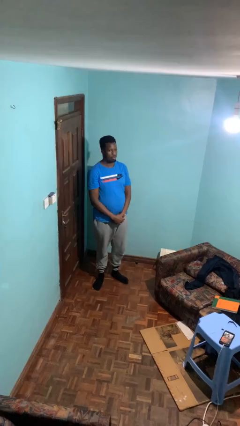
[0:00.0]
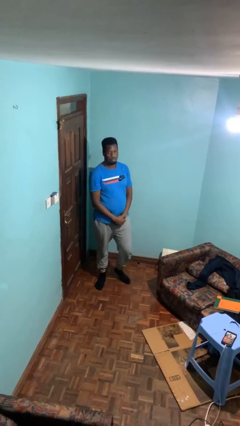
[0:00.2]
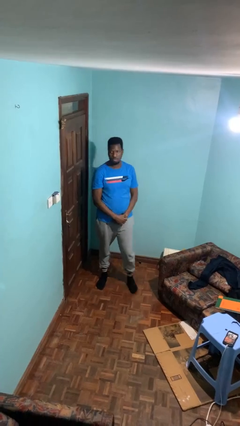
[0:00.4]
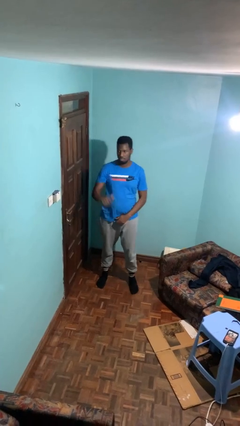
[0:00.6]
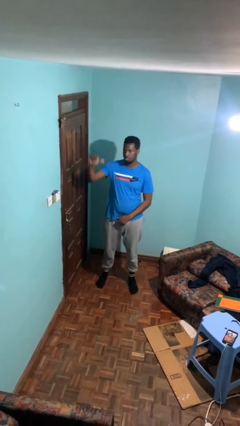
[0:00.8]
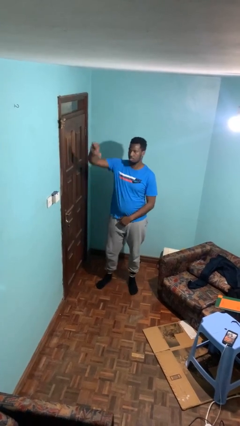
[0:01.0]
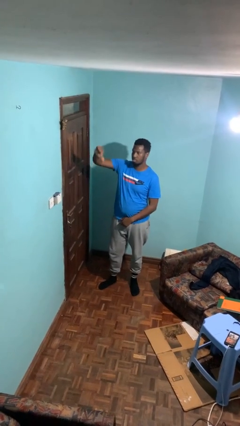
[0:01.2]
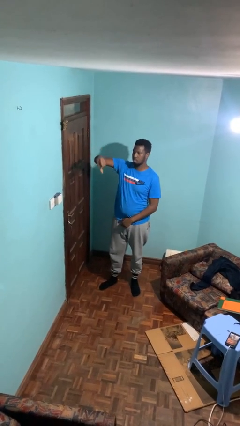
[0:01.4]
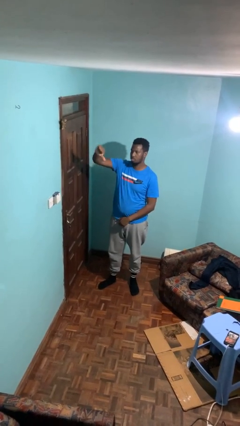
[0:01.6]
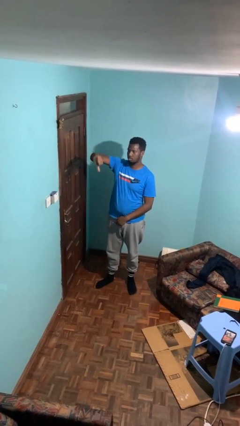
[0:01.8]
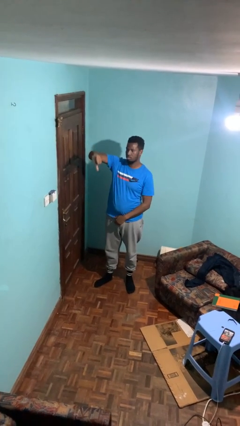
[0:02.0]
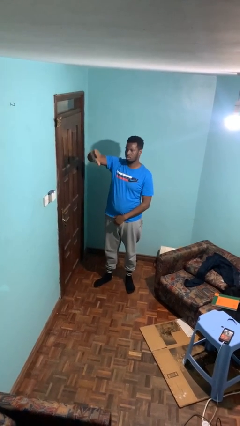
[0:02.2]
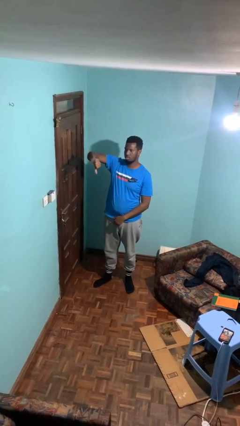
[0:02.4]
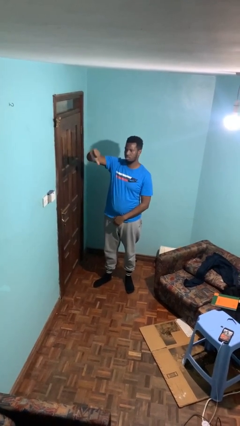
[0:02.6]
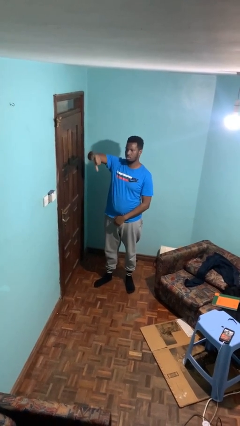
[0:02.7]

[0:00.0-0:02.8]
person gestures thumbs down

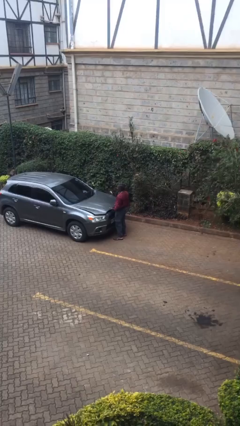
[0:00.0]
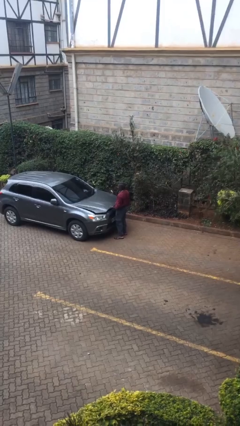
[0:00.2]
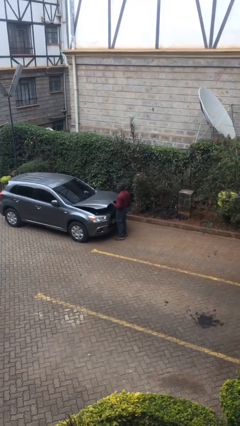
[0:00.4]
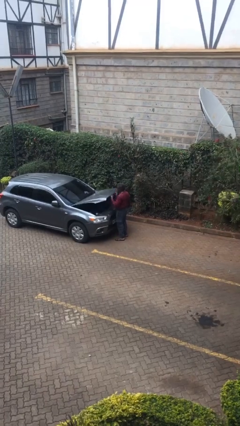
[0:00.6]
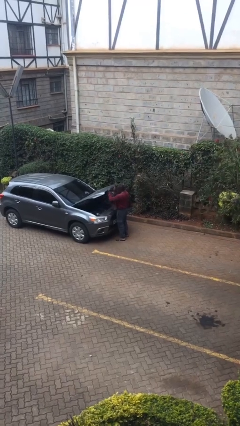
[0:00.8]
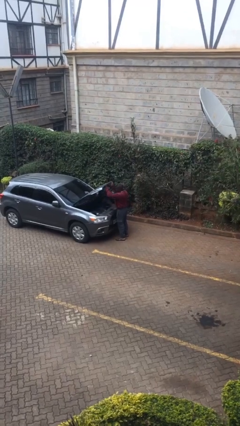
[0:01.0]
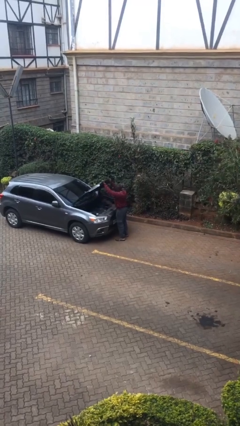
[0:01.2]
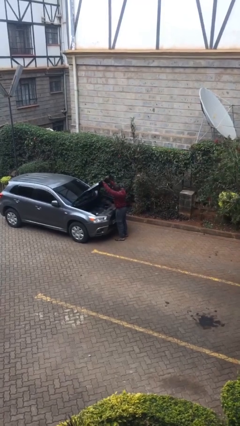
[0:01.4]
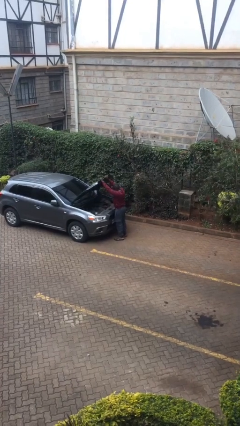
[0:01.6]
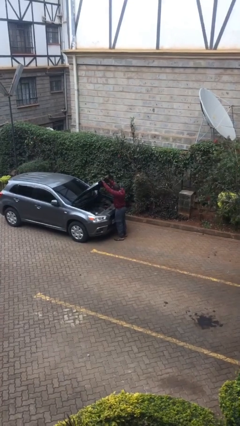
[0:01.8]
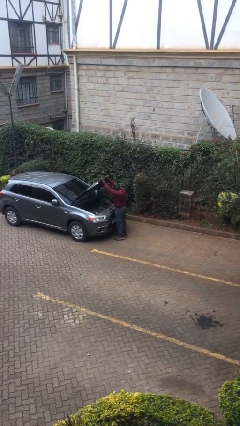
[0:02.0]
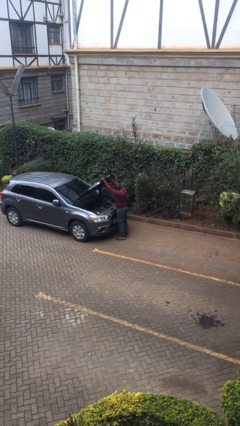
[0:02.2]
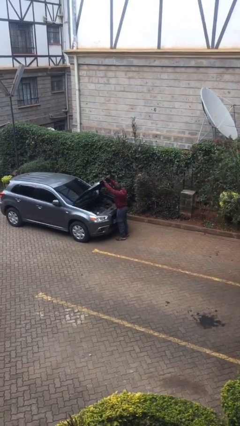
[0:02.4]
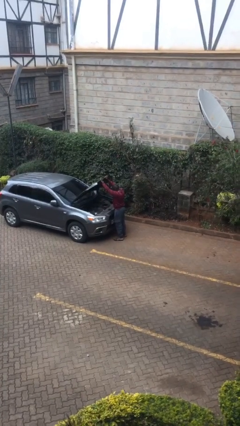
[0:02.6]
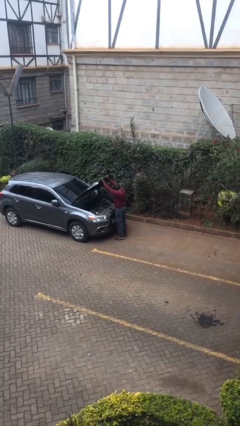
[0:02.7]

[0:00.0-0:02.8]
person opens car hood

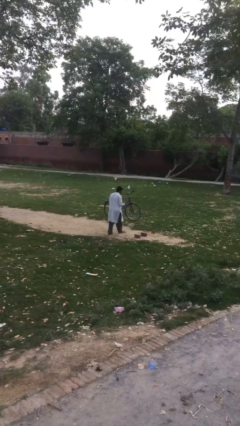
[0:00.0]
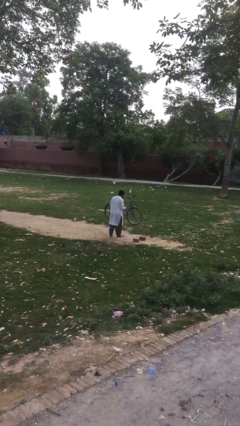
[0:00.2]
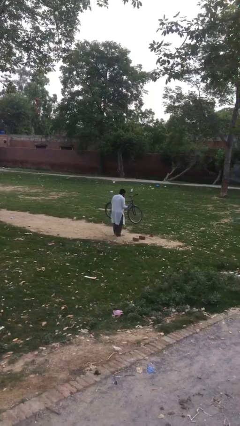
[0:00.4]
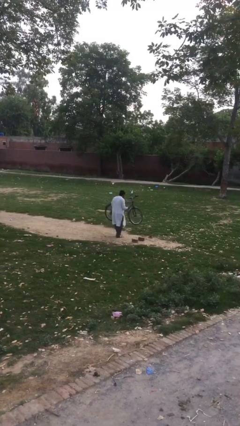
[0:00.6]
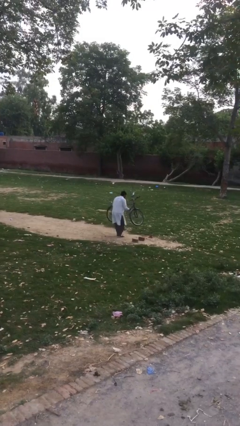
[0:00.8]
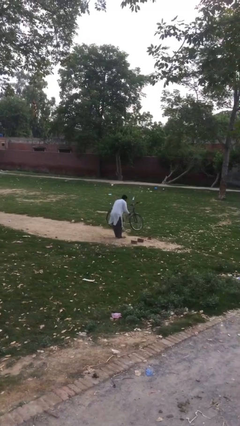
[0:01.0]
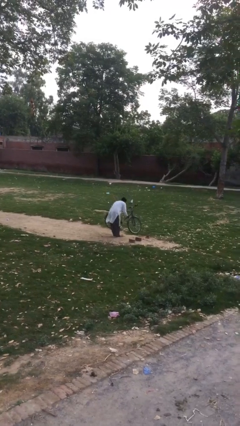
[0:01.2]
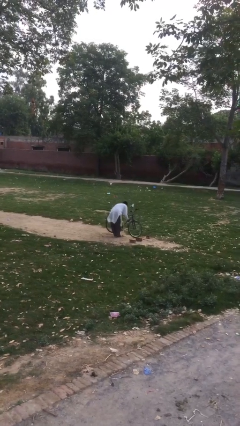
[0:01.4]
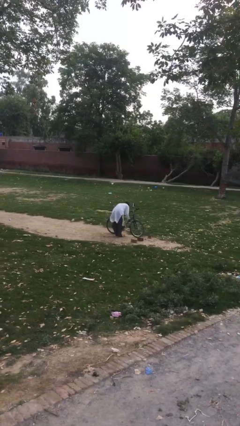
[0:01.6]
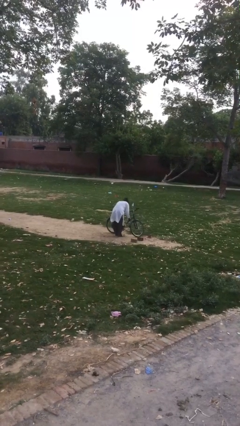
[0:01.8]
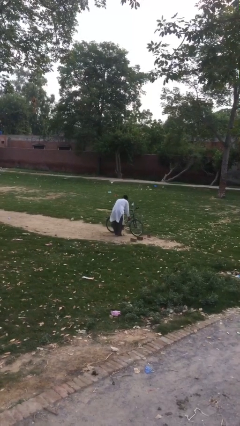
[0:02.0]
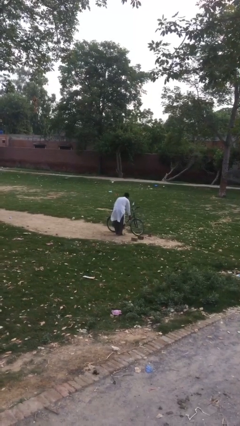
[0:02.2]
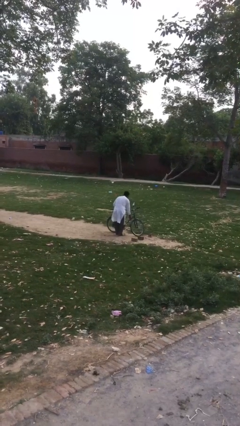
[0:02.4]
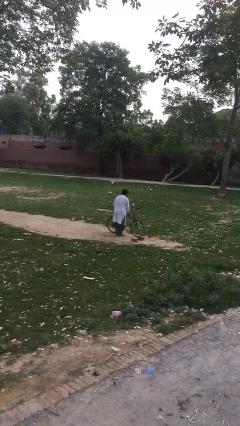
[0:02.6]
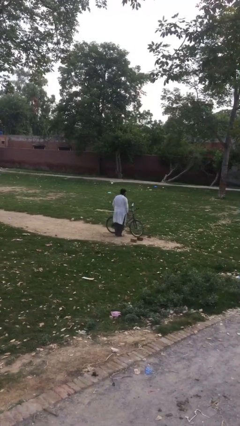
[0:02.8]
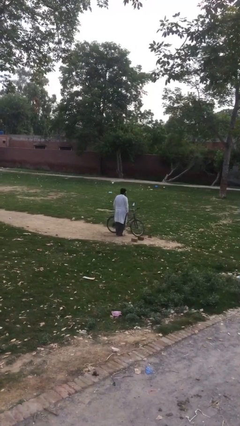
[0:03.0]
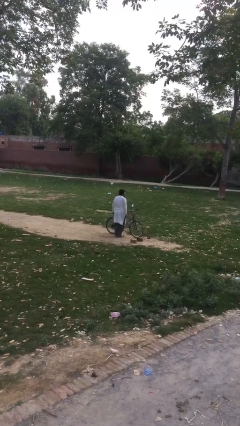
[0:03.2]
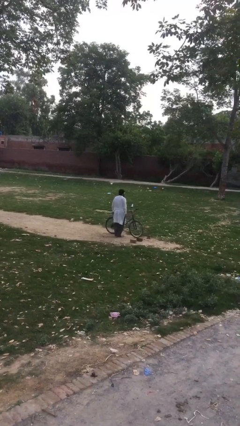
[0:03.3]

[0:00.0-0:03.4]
person puts down object on floor

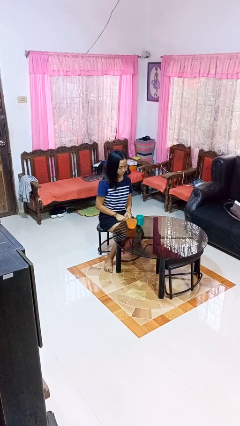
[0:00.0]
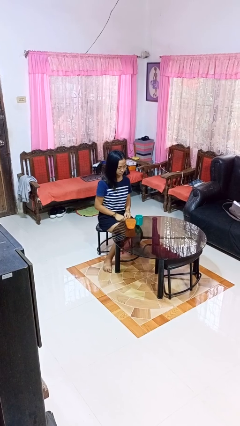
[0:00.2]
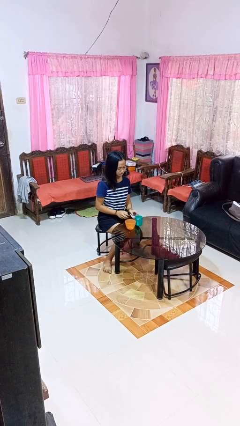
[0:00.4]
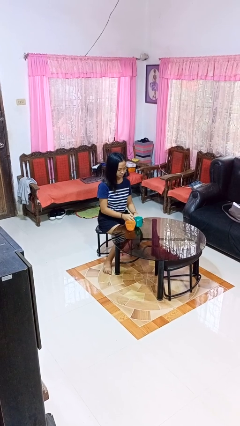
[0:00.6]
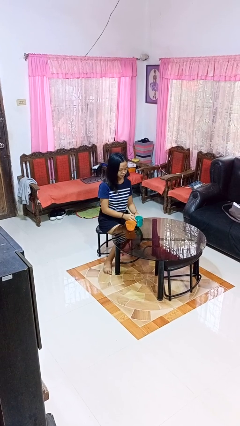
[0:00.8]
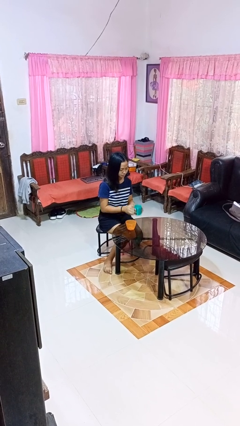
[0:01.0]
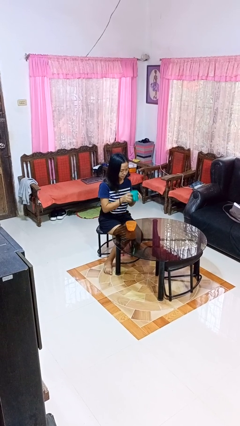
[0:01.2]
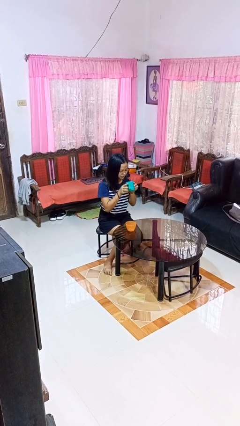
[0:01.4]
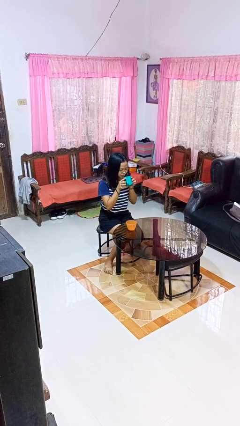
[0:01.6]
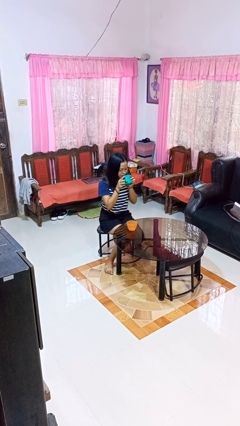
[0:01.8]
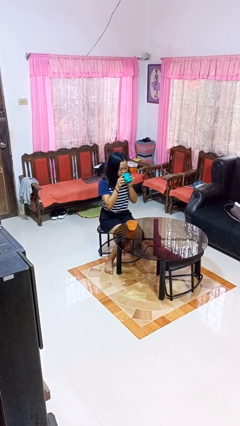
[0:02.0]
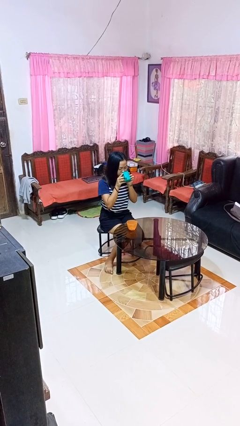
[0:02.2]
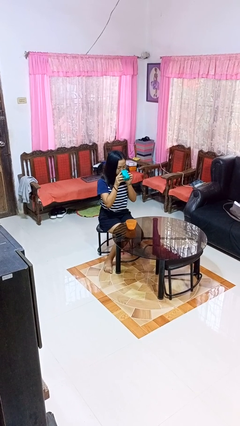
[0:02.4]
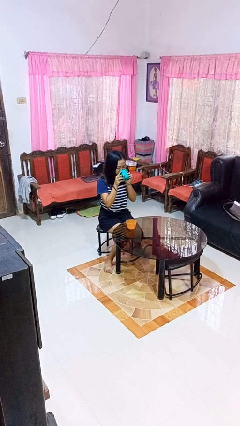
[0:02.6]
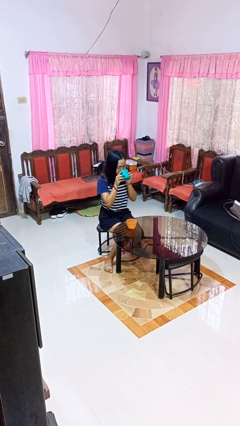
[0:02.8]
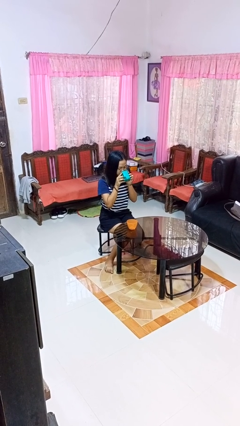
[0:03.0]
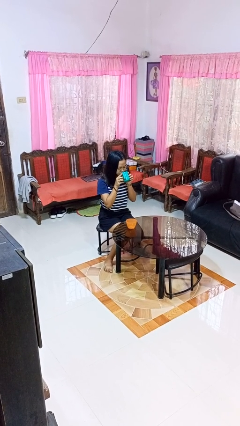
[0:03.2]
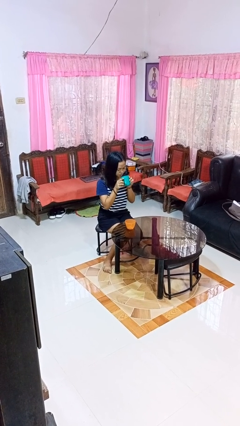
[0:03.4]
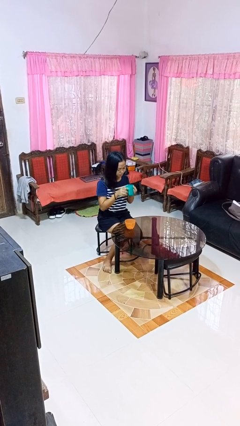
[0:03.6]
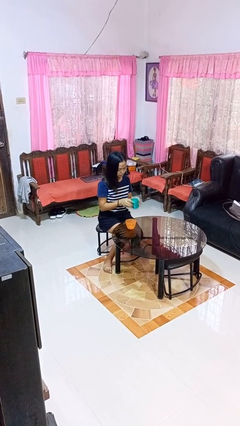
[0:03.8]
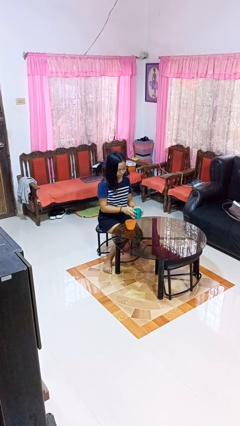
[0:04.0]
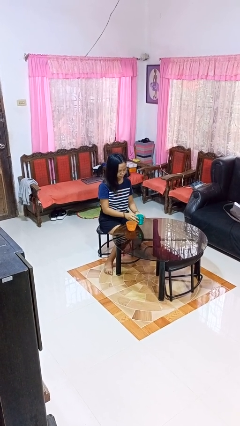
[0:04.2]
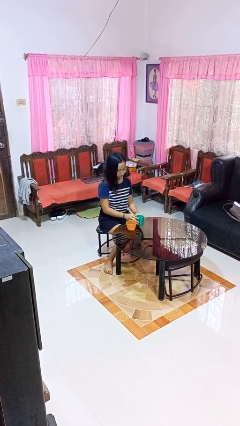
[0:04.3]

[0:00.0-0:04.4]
person drinks from cup

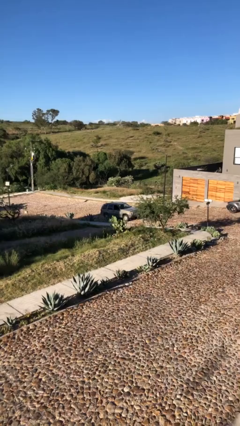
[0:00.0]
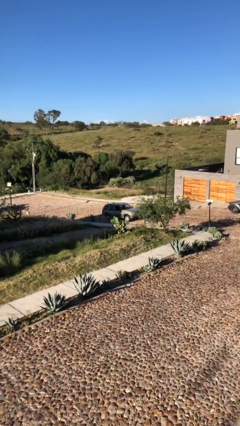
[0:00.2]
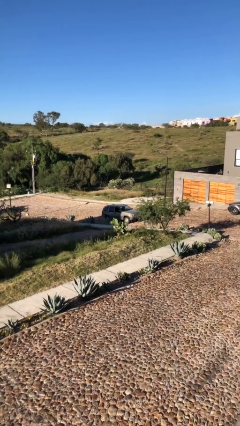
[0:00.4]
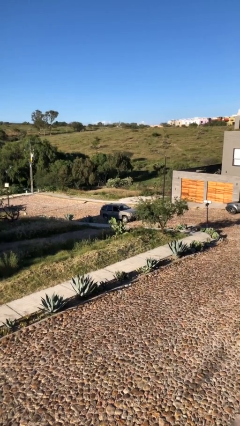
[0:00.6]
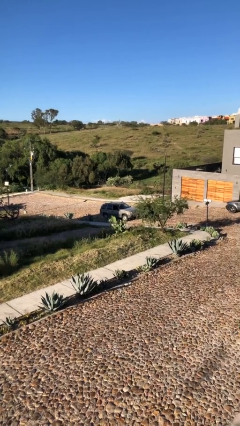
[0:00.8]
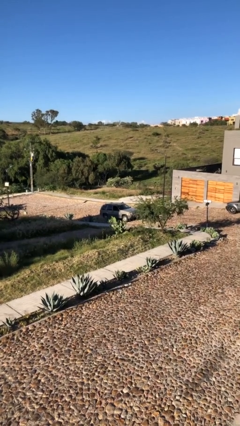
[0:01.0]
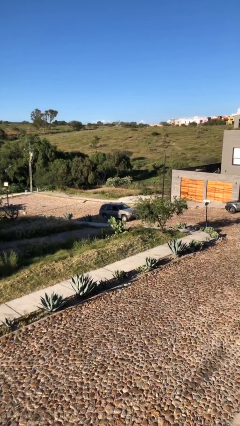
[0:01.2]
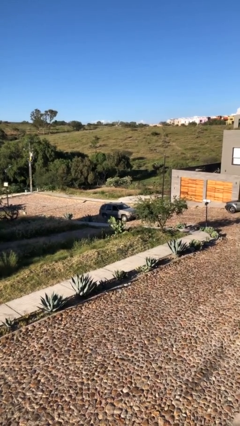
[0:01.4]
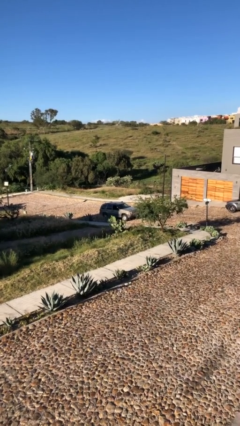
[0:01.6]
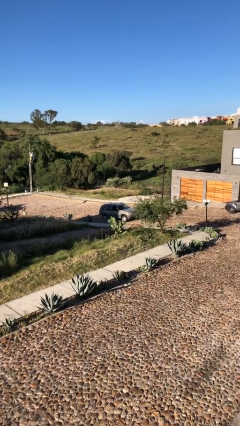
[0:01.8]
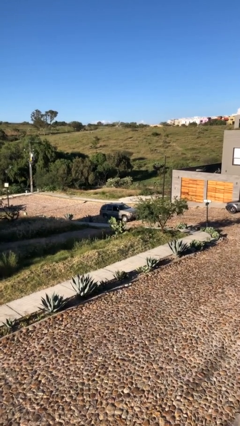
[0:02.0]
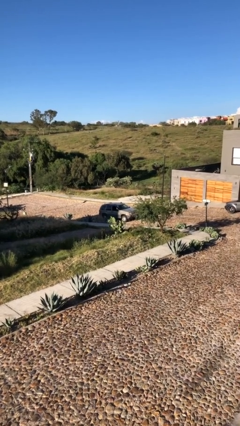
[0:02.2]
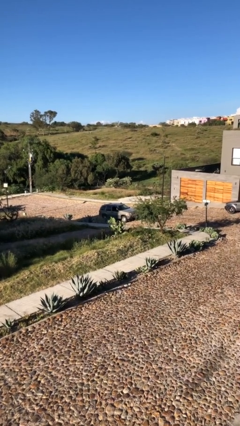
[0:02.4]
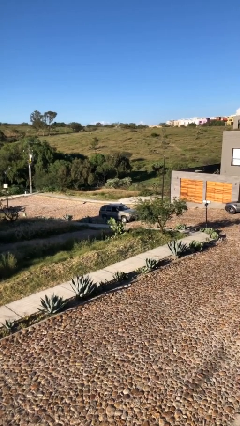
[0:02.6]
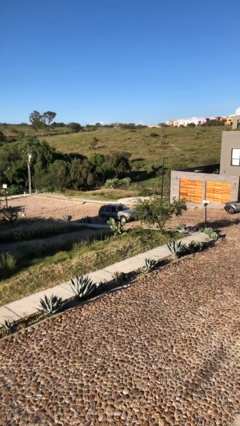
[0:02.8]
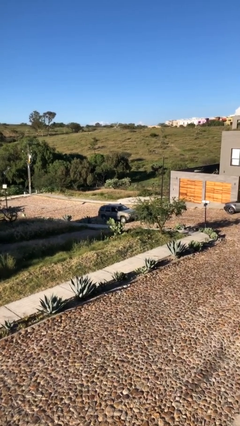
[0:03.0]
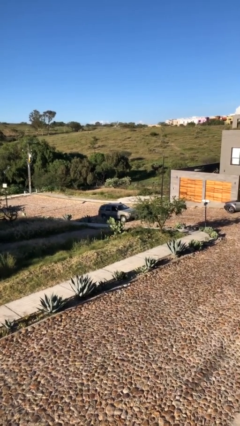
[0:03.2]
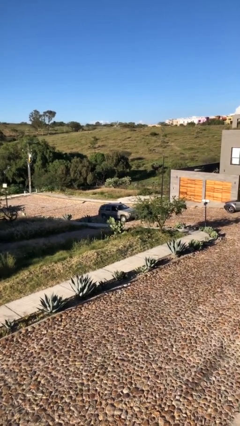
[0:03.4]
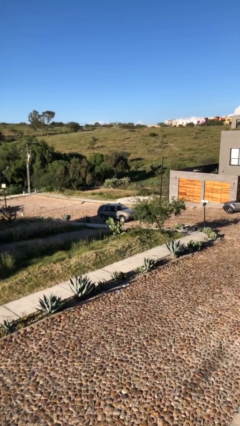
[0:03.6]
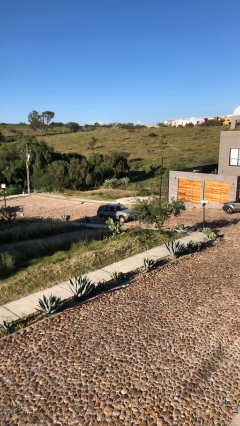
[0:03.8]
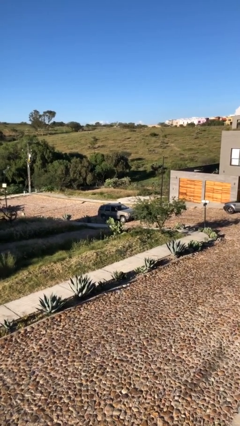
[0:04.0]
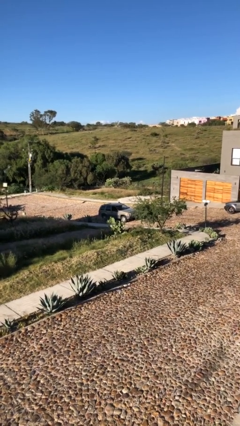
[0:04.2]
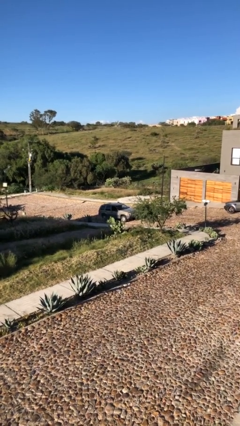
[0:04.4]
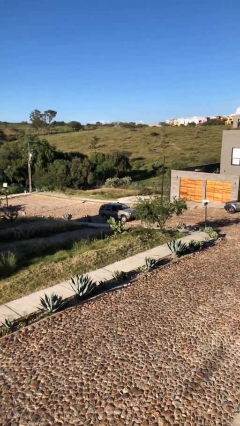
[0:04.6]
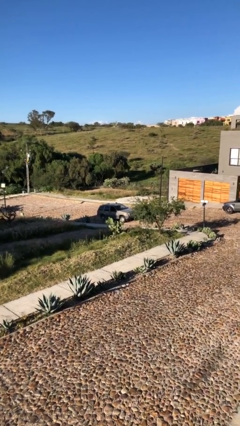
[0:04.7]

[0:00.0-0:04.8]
car drops off person
